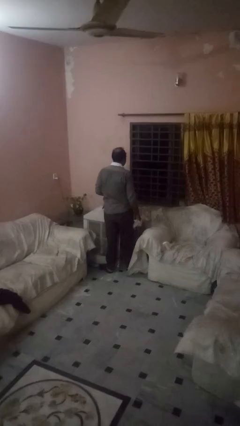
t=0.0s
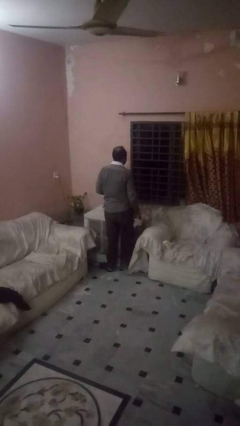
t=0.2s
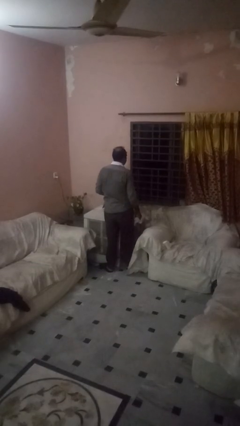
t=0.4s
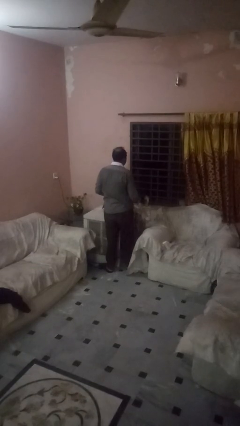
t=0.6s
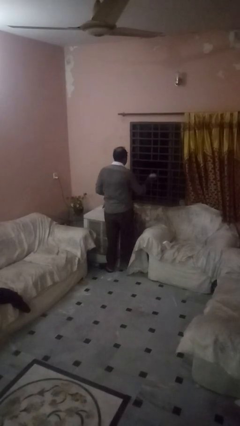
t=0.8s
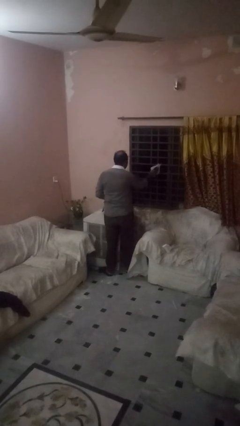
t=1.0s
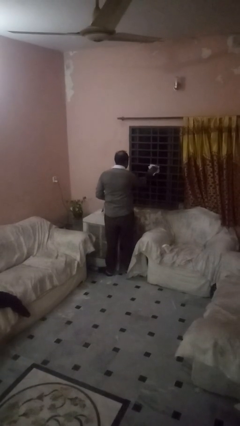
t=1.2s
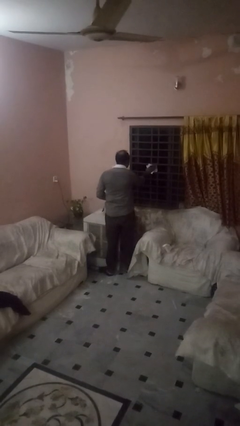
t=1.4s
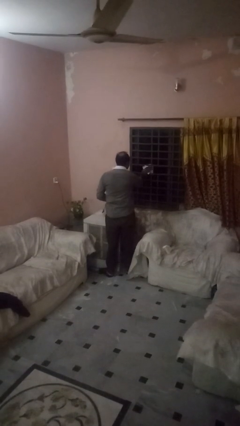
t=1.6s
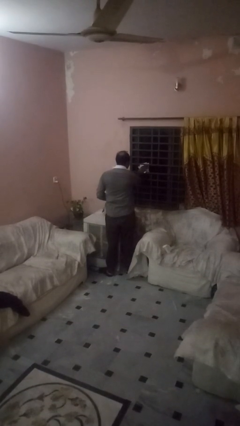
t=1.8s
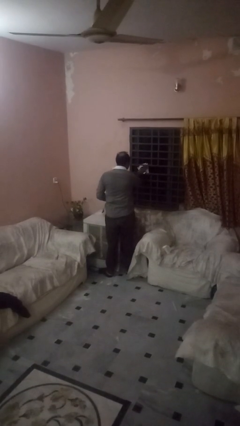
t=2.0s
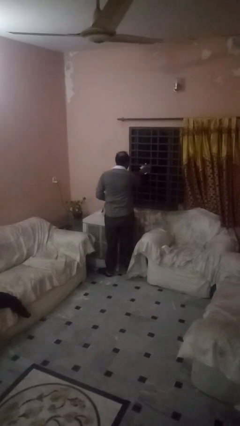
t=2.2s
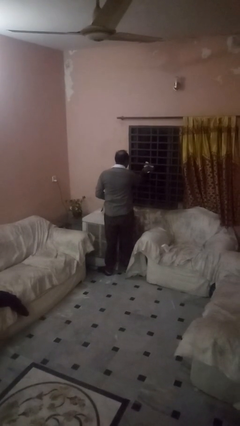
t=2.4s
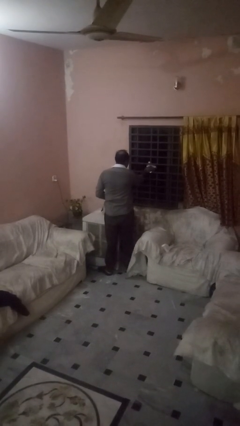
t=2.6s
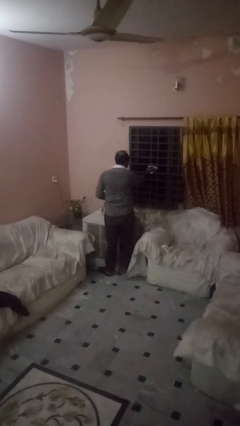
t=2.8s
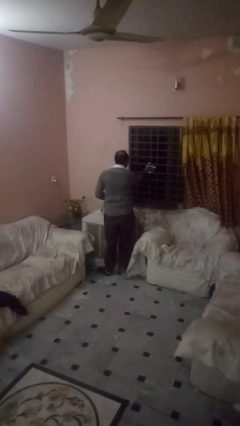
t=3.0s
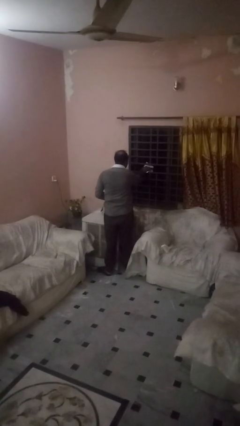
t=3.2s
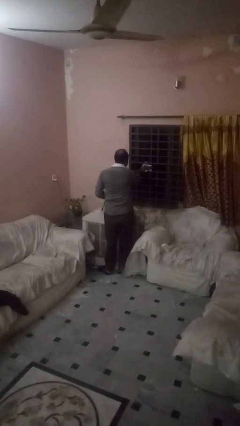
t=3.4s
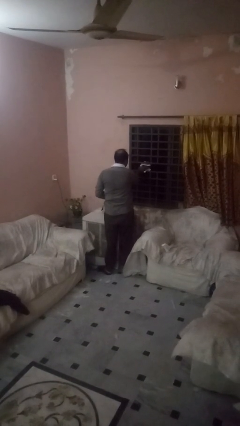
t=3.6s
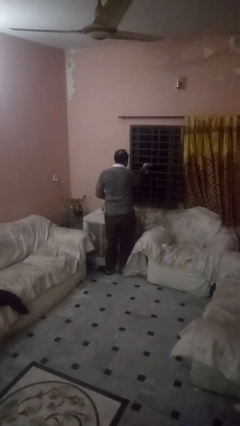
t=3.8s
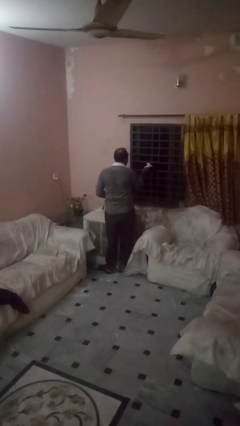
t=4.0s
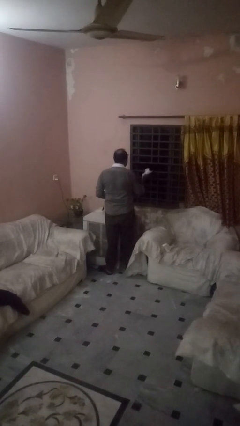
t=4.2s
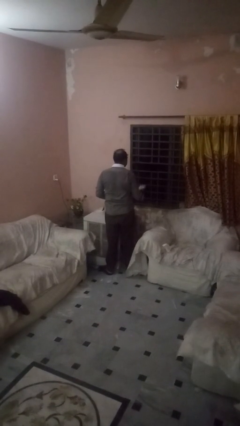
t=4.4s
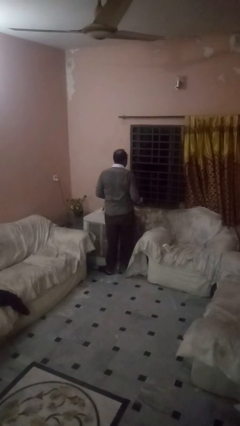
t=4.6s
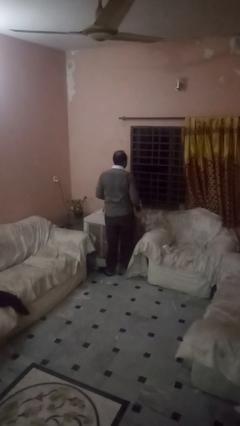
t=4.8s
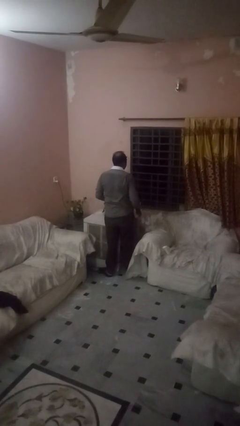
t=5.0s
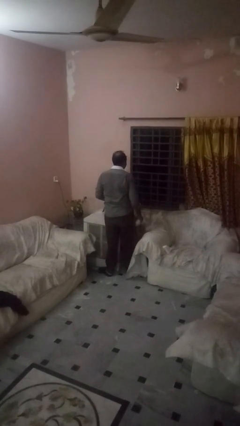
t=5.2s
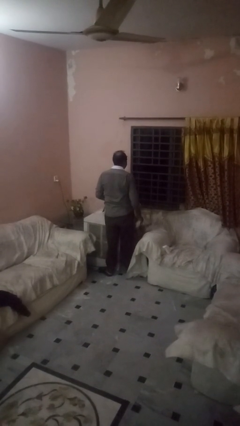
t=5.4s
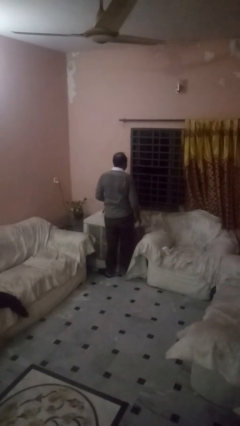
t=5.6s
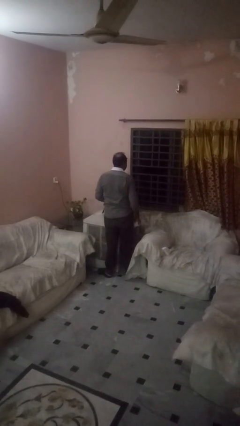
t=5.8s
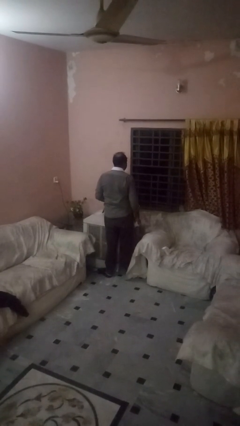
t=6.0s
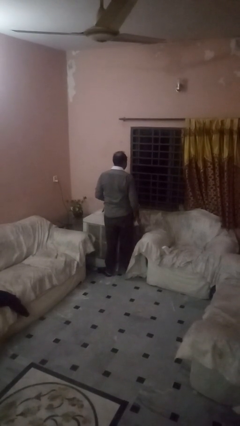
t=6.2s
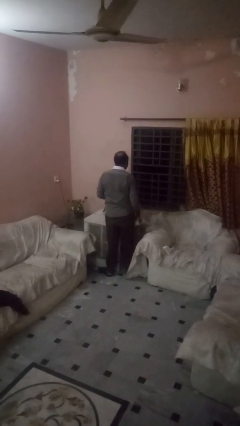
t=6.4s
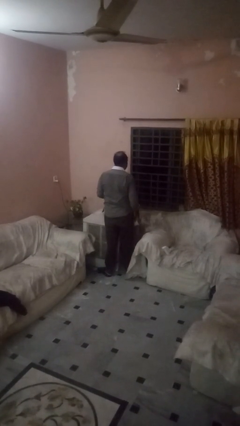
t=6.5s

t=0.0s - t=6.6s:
person washes window

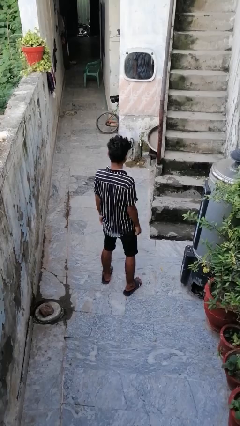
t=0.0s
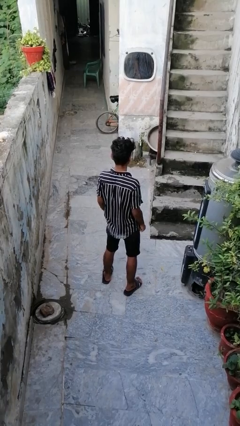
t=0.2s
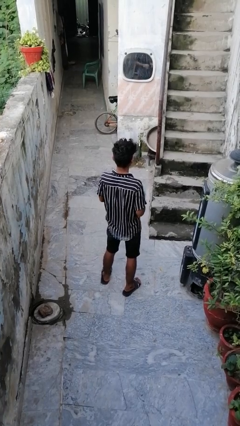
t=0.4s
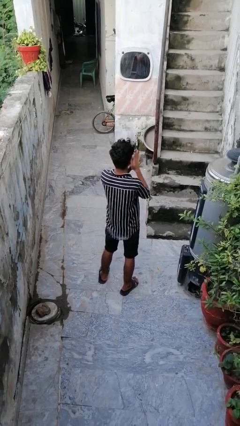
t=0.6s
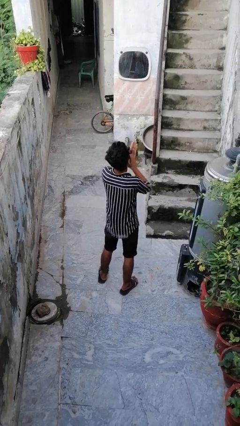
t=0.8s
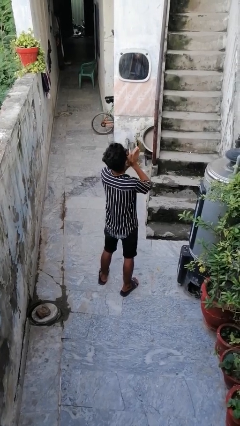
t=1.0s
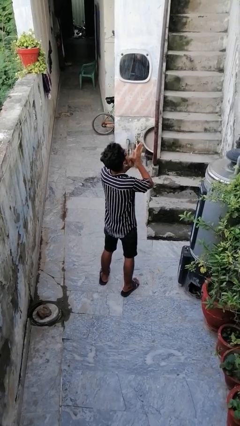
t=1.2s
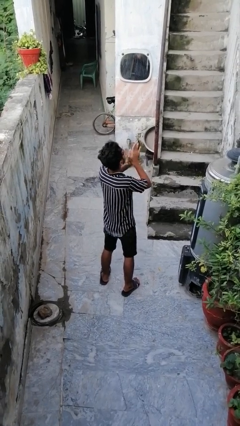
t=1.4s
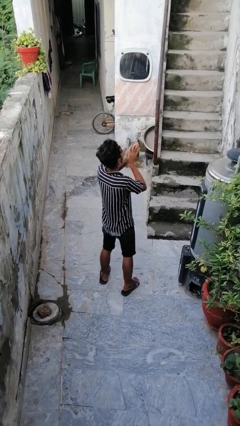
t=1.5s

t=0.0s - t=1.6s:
person blows into hands

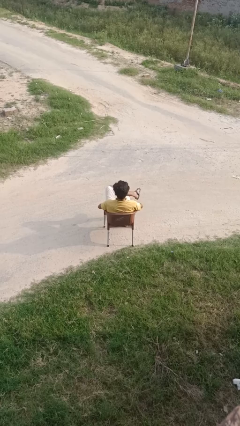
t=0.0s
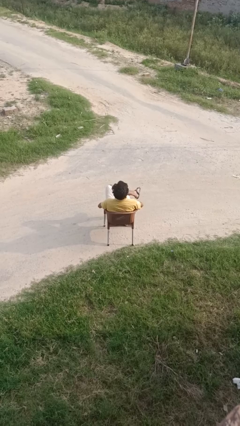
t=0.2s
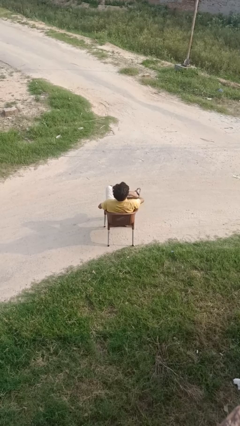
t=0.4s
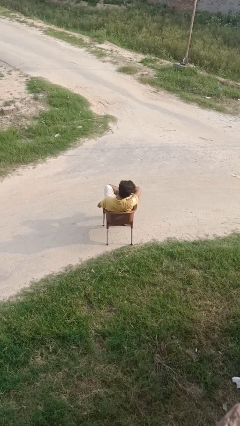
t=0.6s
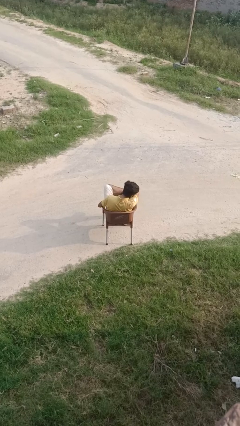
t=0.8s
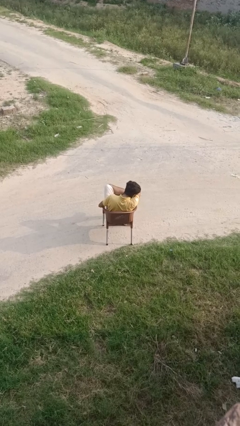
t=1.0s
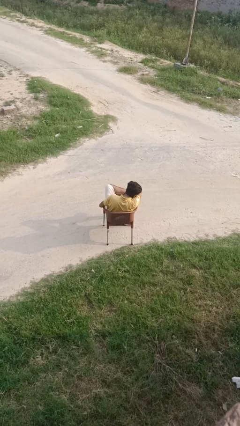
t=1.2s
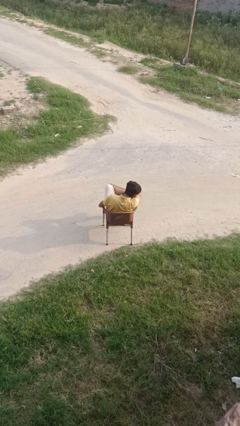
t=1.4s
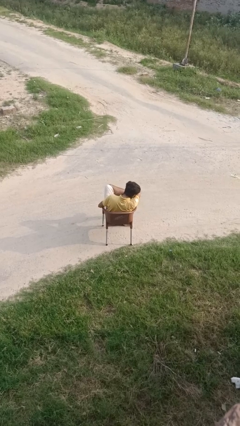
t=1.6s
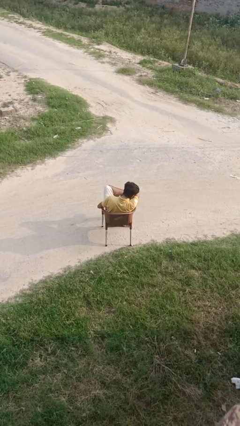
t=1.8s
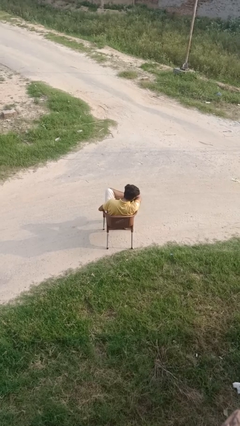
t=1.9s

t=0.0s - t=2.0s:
person sneezes into arm

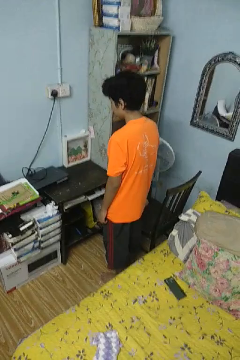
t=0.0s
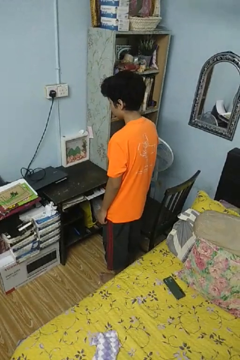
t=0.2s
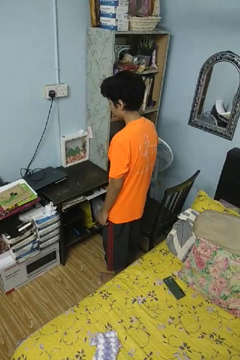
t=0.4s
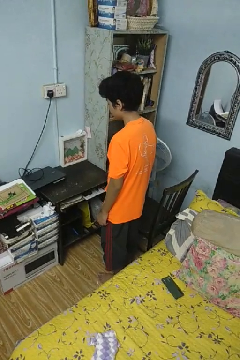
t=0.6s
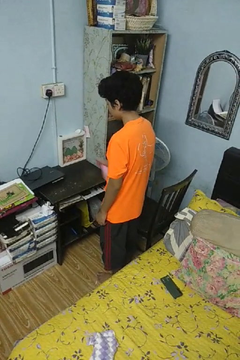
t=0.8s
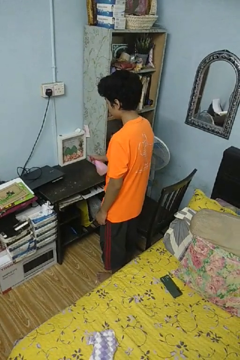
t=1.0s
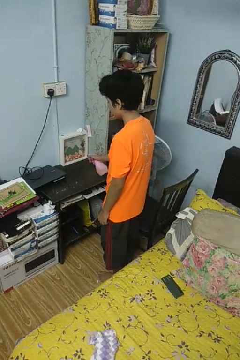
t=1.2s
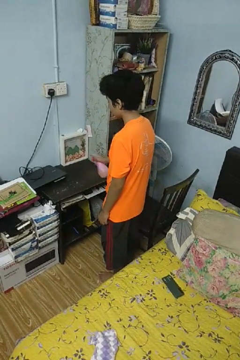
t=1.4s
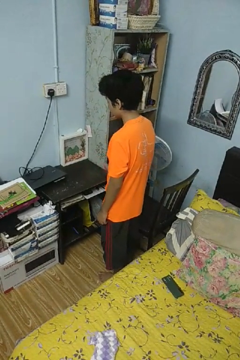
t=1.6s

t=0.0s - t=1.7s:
person sprays from bottle

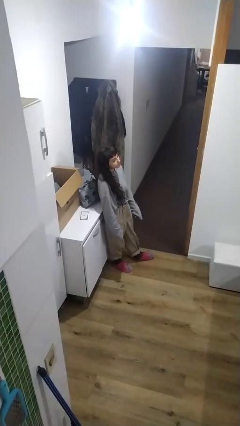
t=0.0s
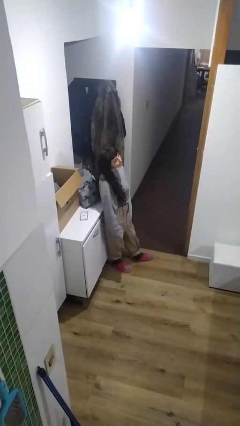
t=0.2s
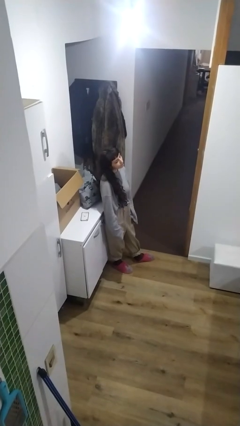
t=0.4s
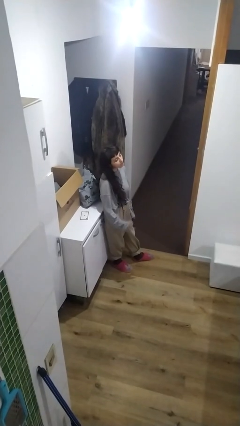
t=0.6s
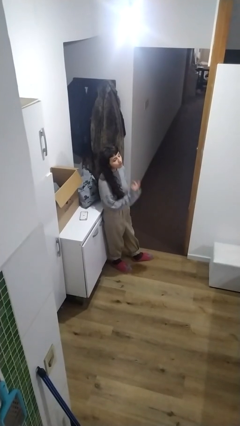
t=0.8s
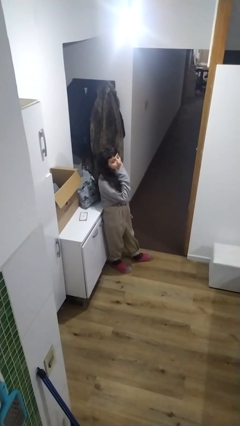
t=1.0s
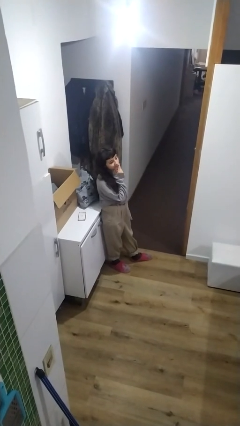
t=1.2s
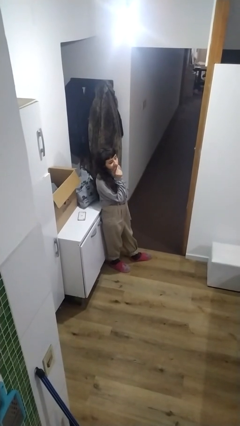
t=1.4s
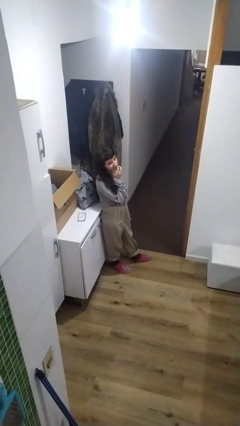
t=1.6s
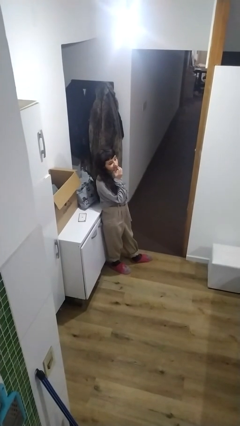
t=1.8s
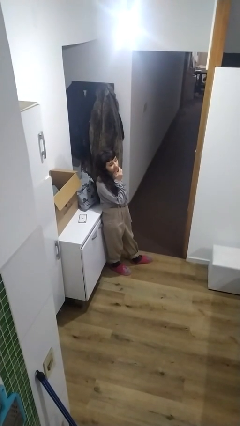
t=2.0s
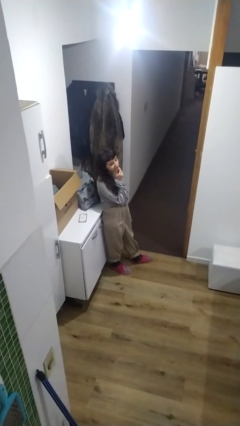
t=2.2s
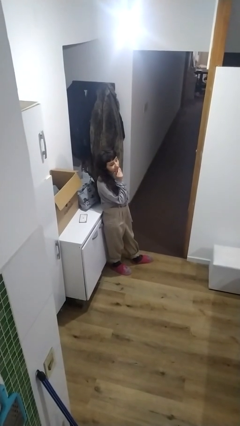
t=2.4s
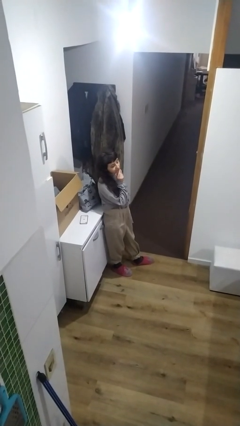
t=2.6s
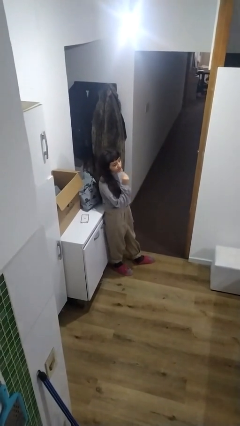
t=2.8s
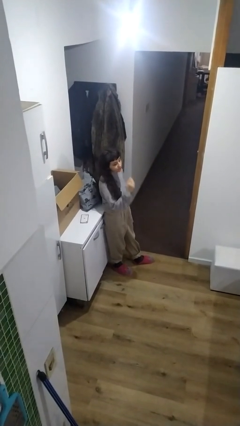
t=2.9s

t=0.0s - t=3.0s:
person strokes chin

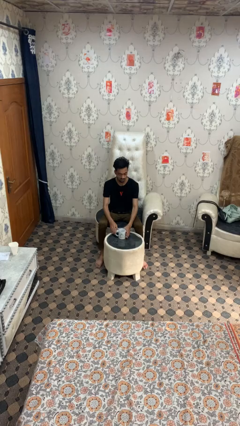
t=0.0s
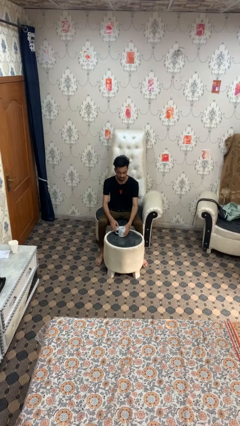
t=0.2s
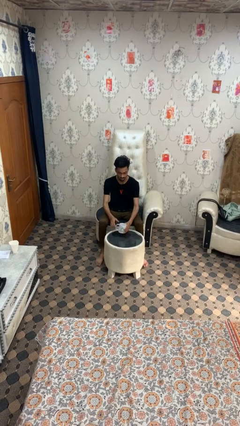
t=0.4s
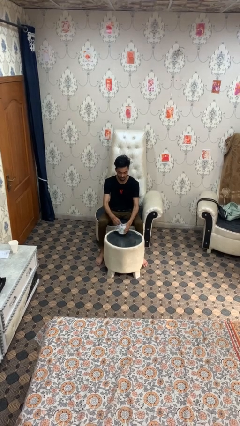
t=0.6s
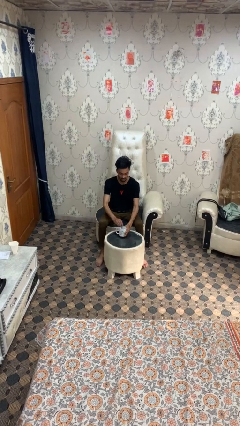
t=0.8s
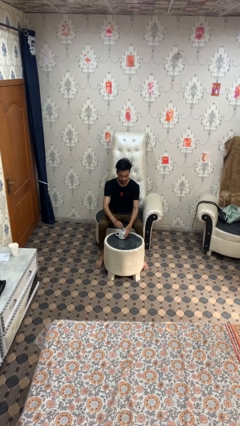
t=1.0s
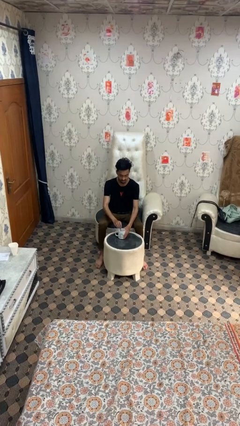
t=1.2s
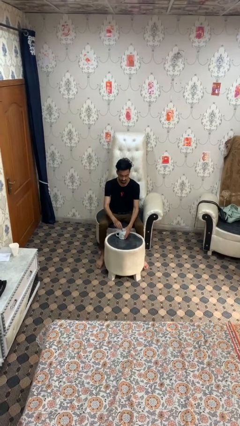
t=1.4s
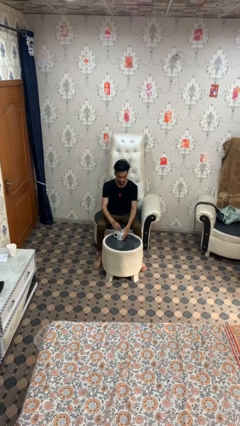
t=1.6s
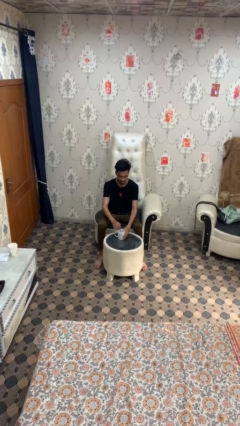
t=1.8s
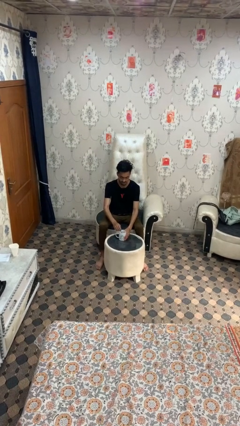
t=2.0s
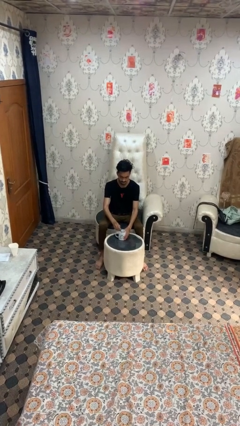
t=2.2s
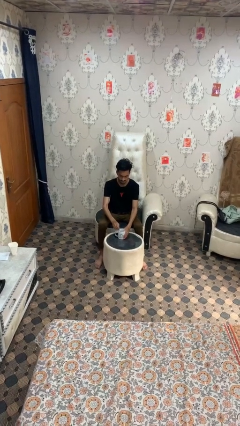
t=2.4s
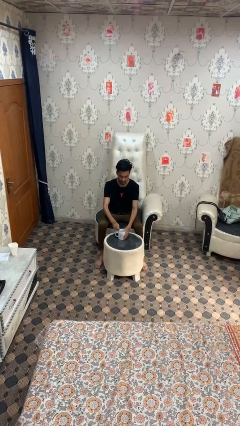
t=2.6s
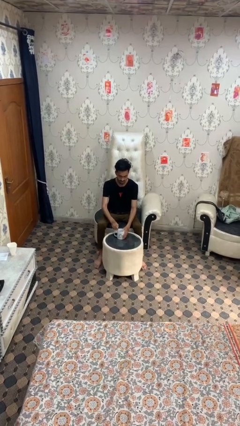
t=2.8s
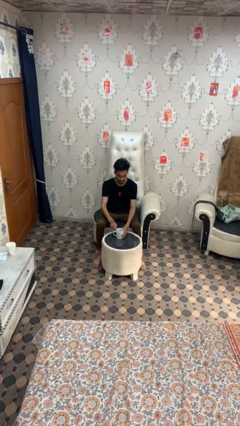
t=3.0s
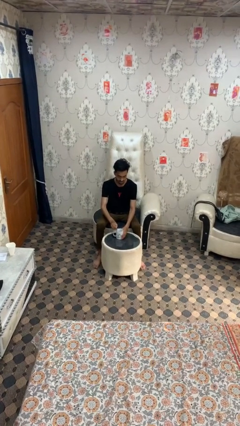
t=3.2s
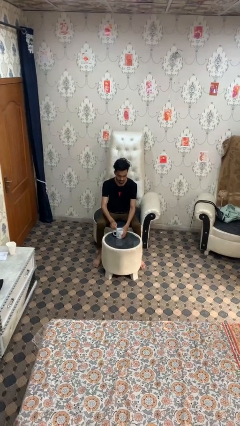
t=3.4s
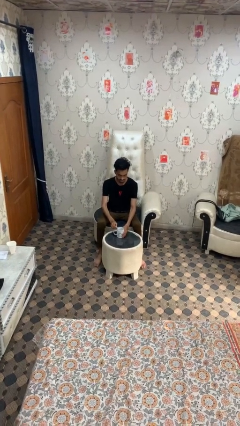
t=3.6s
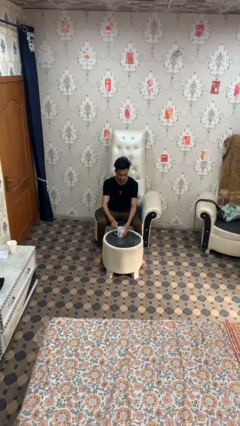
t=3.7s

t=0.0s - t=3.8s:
person stirs mug
